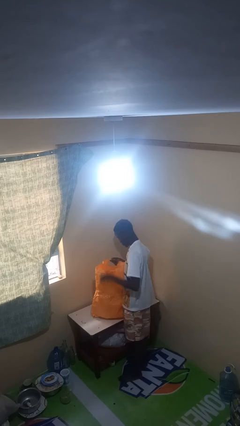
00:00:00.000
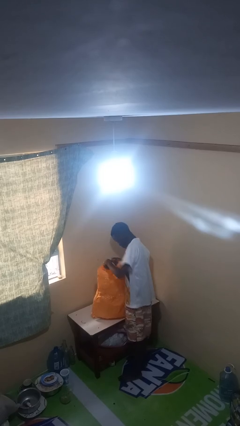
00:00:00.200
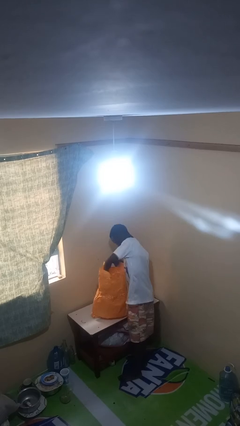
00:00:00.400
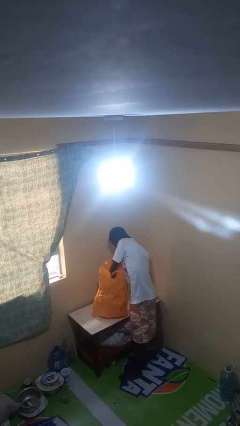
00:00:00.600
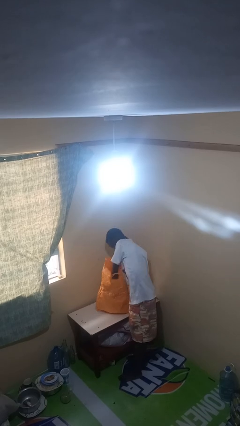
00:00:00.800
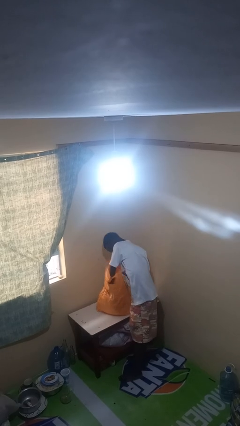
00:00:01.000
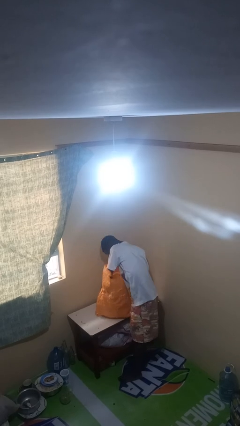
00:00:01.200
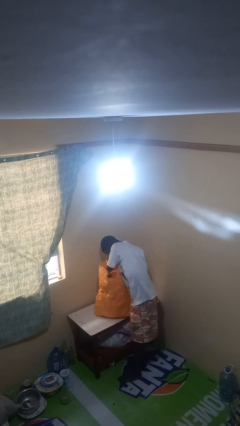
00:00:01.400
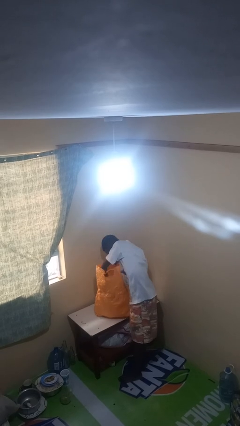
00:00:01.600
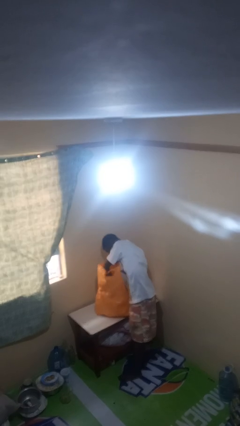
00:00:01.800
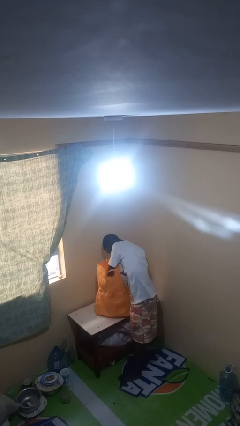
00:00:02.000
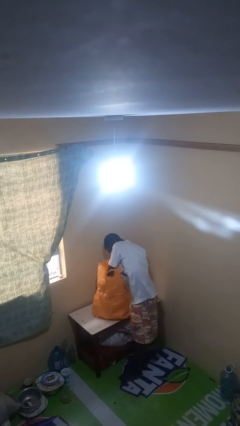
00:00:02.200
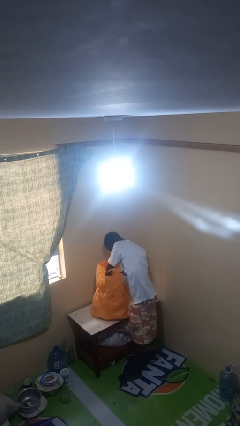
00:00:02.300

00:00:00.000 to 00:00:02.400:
person searches in bag

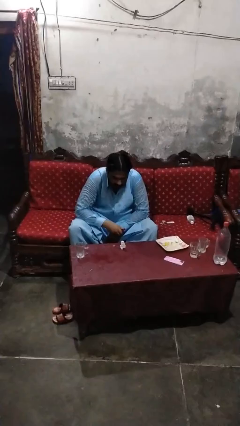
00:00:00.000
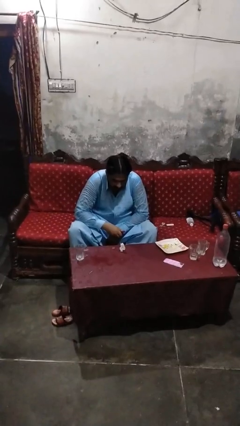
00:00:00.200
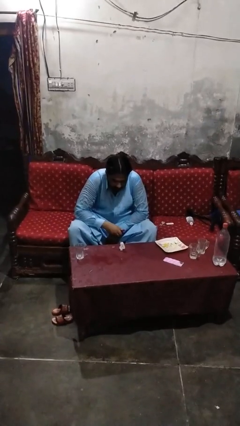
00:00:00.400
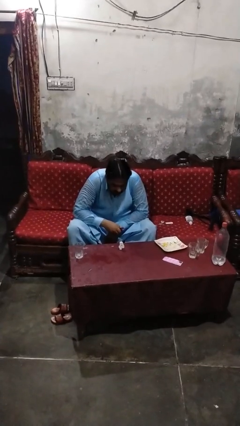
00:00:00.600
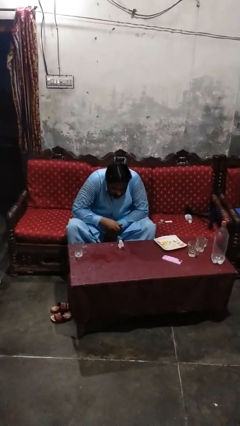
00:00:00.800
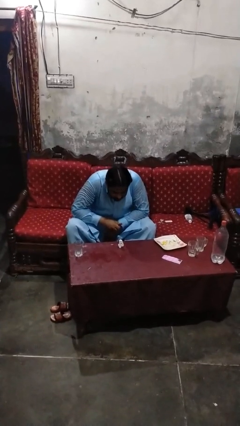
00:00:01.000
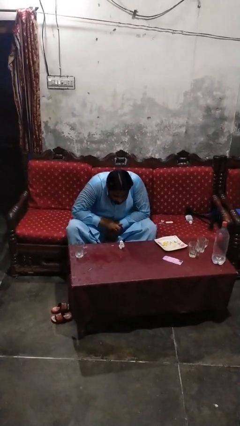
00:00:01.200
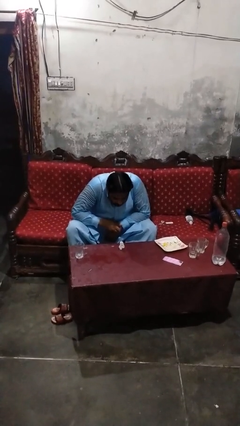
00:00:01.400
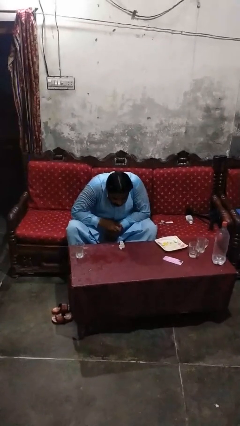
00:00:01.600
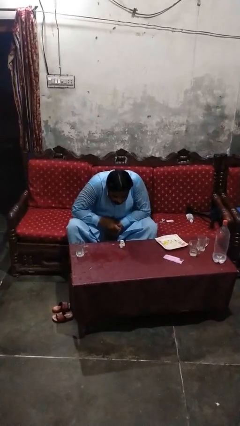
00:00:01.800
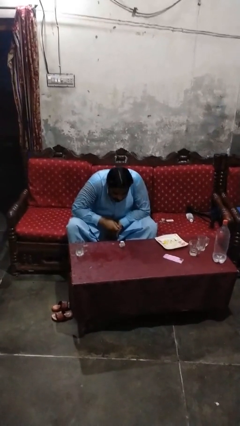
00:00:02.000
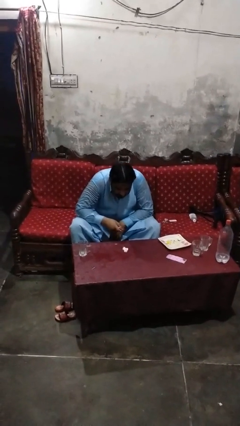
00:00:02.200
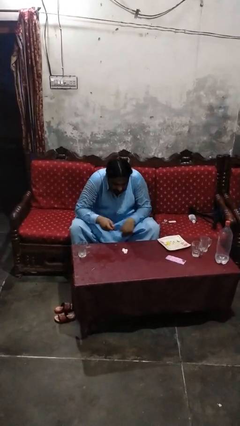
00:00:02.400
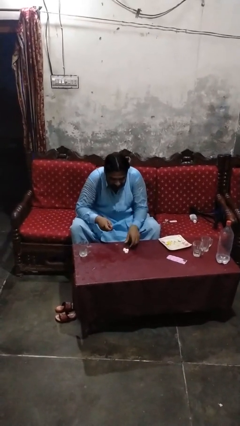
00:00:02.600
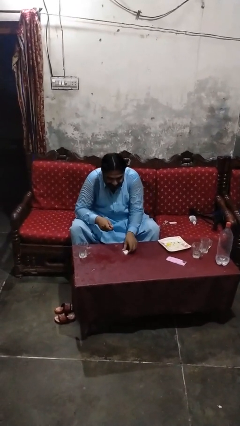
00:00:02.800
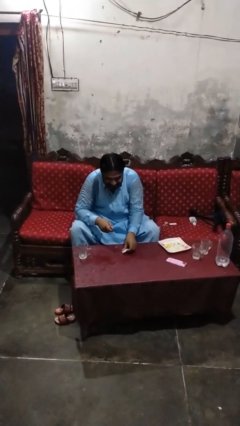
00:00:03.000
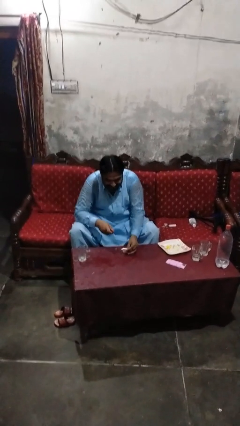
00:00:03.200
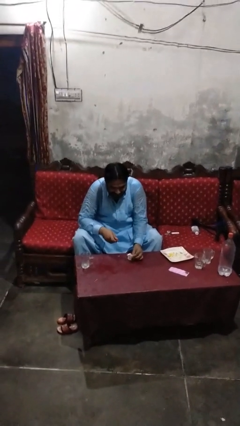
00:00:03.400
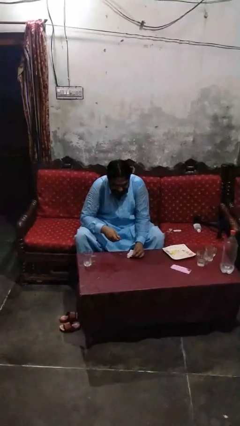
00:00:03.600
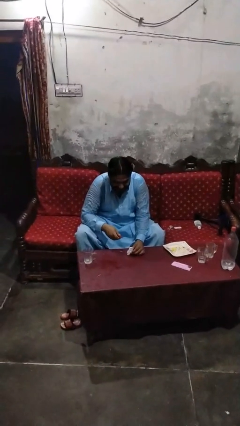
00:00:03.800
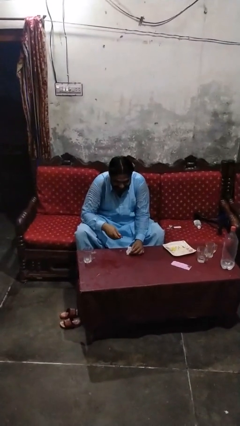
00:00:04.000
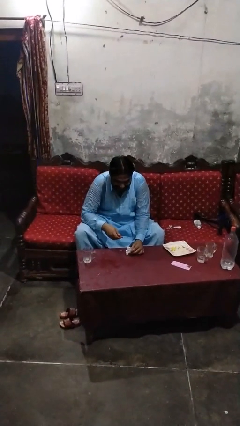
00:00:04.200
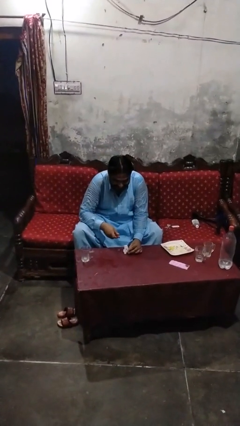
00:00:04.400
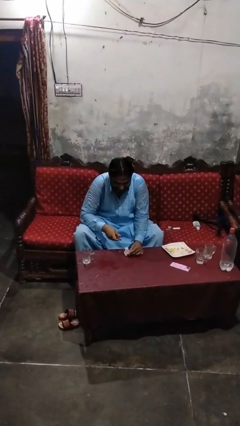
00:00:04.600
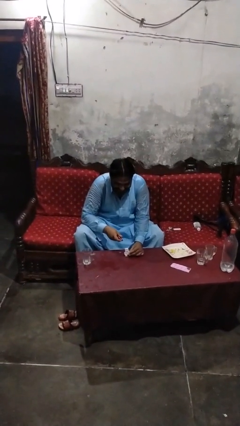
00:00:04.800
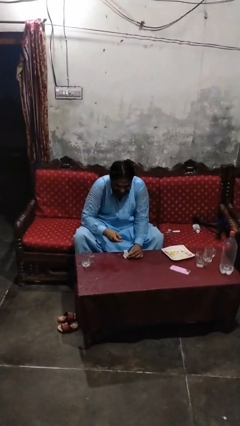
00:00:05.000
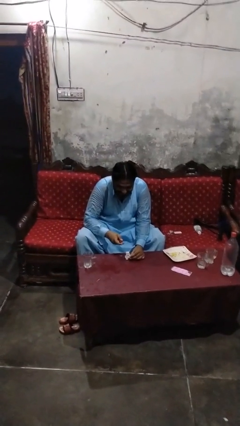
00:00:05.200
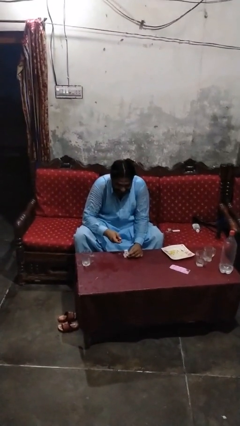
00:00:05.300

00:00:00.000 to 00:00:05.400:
person extinguishes candle

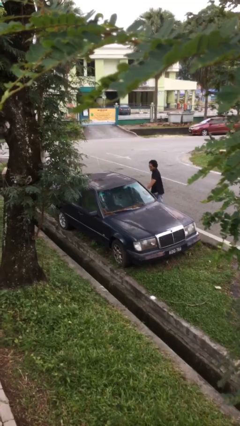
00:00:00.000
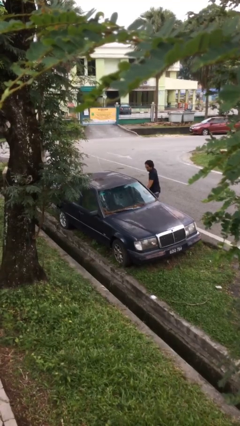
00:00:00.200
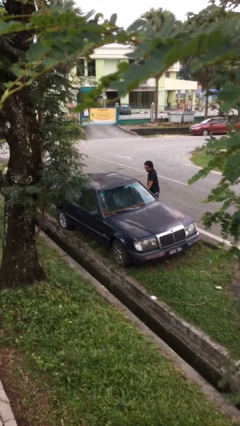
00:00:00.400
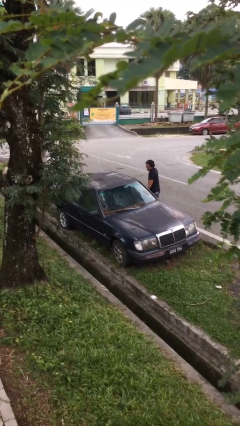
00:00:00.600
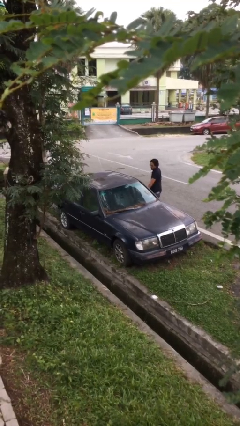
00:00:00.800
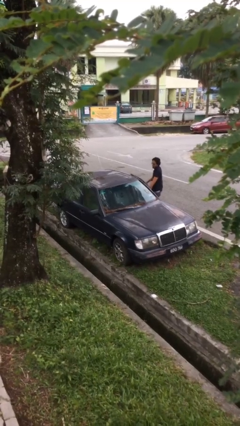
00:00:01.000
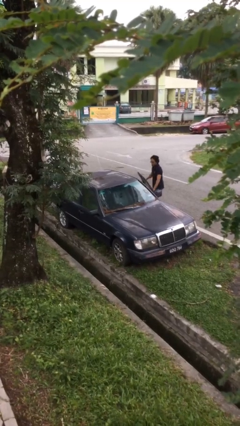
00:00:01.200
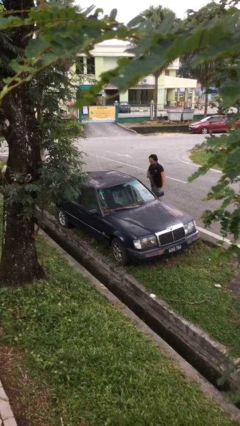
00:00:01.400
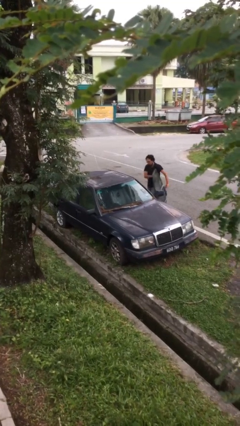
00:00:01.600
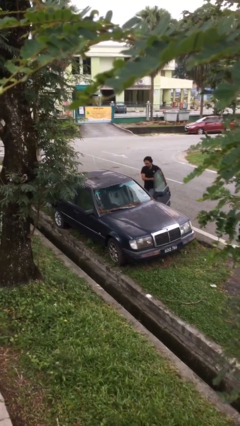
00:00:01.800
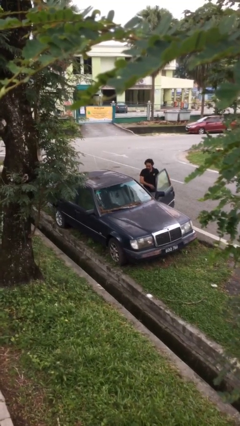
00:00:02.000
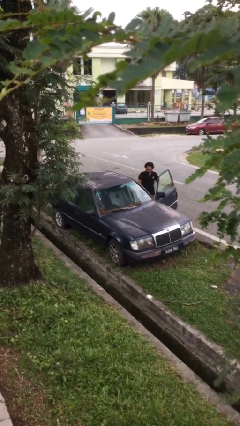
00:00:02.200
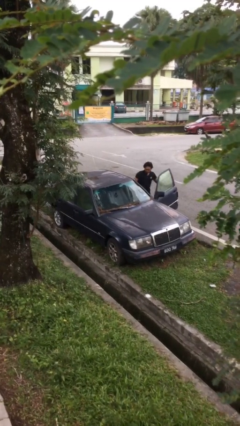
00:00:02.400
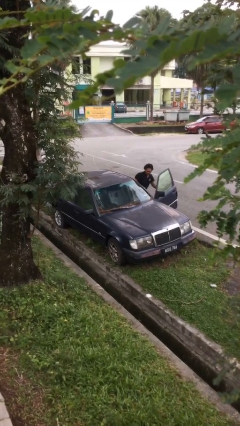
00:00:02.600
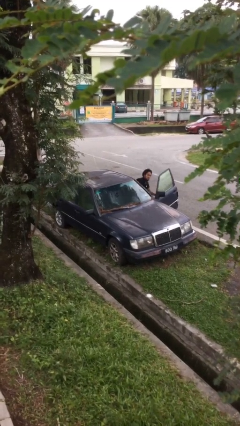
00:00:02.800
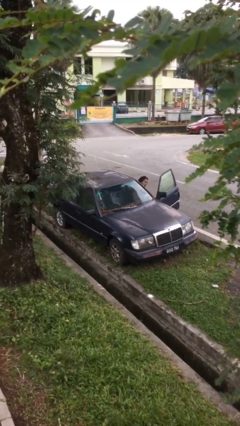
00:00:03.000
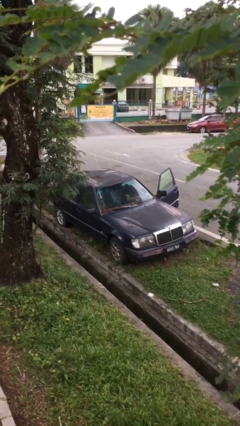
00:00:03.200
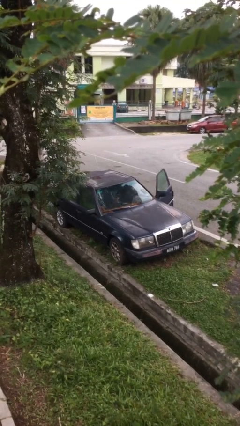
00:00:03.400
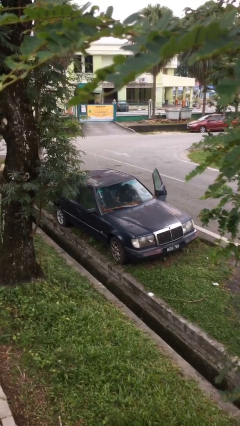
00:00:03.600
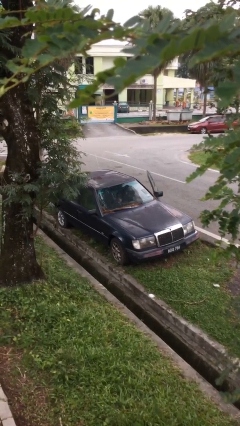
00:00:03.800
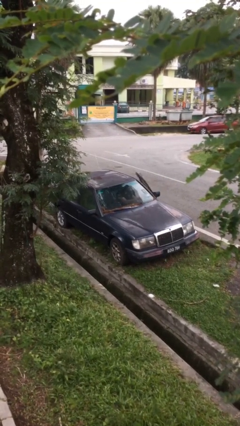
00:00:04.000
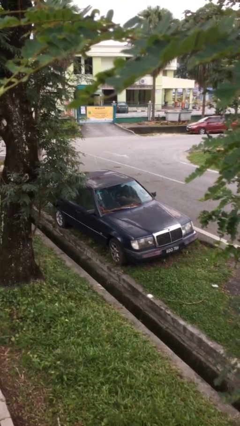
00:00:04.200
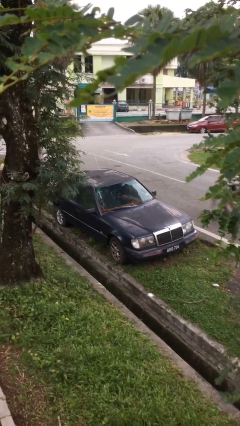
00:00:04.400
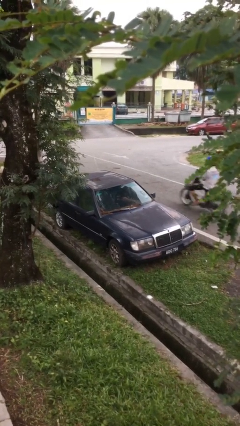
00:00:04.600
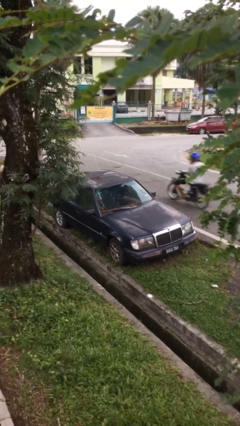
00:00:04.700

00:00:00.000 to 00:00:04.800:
car picks up person

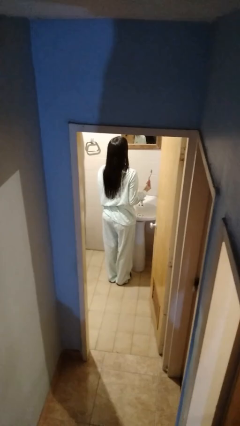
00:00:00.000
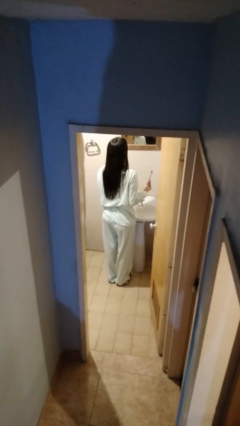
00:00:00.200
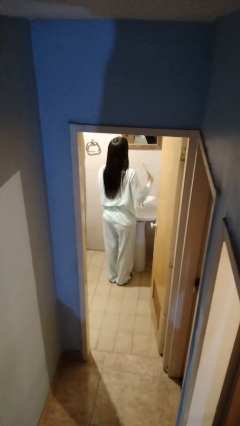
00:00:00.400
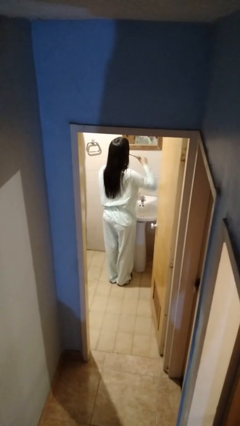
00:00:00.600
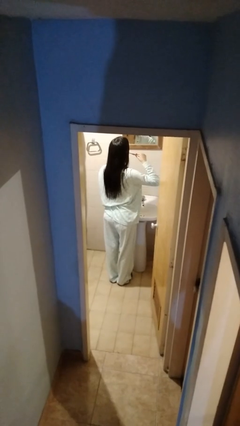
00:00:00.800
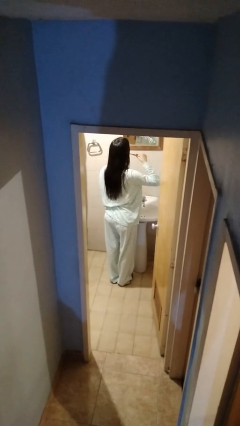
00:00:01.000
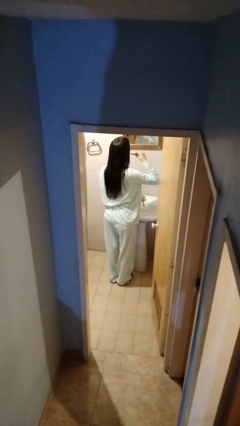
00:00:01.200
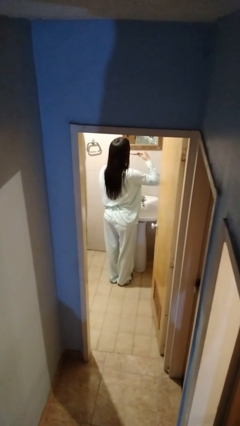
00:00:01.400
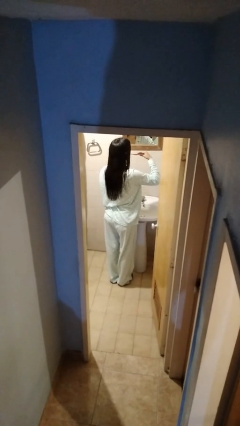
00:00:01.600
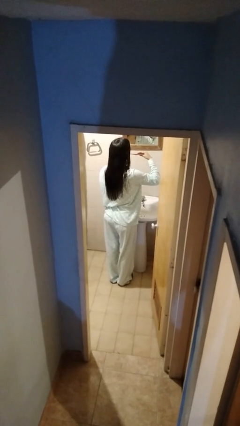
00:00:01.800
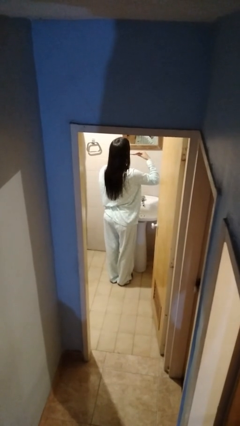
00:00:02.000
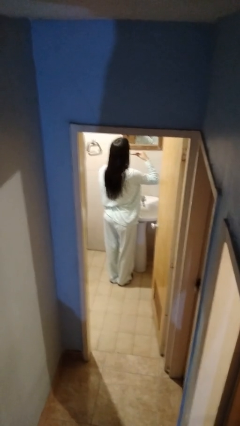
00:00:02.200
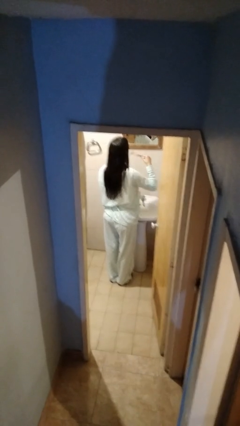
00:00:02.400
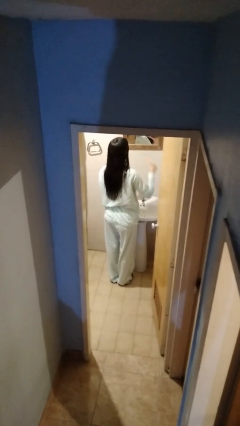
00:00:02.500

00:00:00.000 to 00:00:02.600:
person brushes teeth

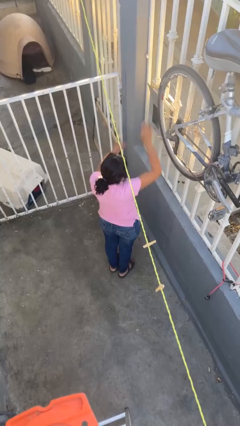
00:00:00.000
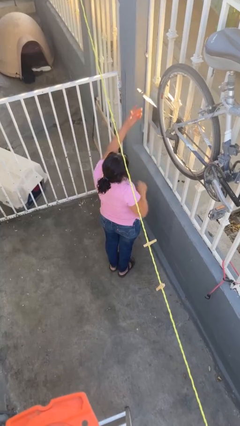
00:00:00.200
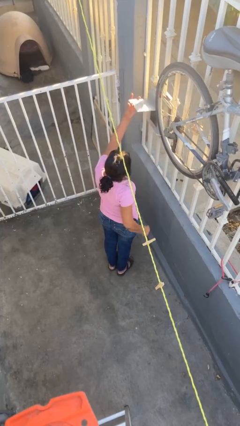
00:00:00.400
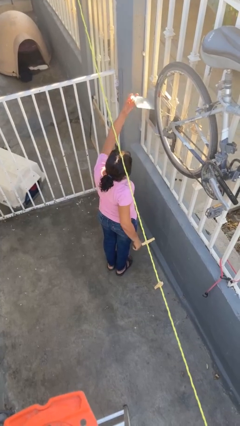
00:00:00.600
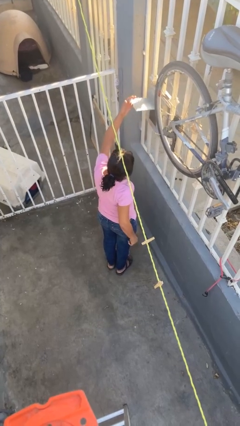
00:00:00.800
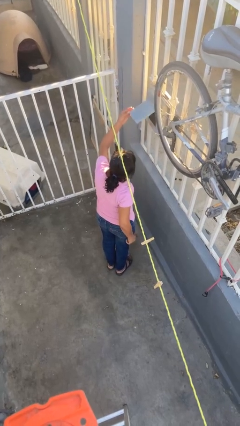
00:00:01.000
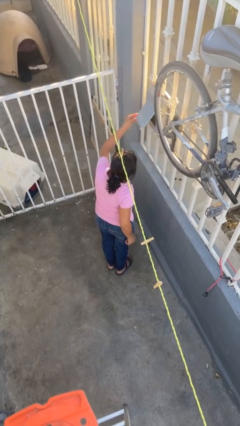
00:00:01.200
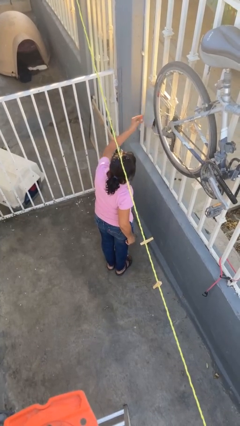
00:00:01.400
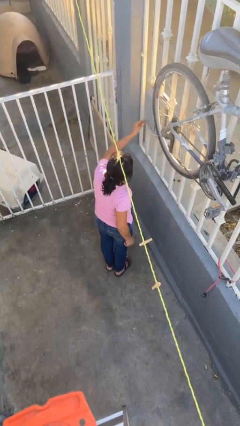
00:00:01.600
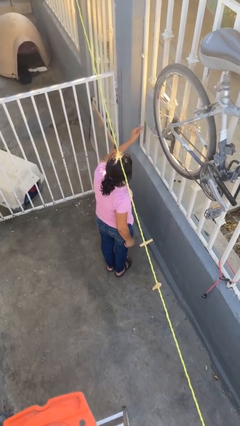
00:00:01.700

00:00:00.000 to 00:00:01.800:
person closes mailbox

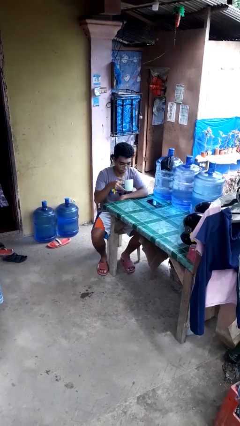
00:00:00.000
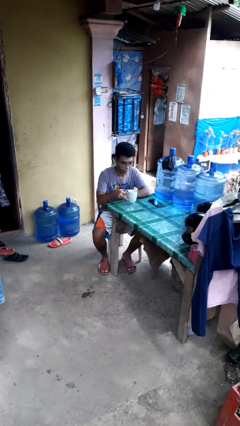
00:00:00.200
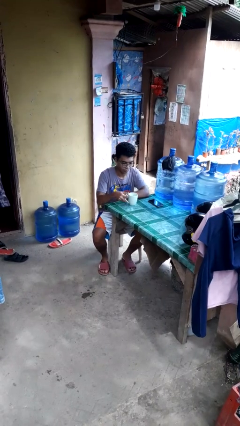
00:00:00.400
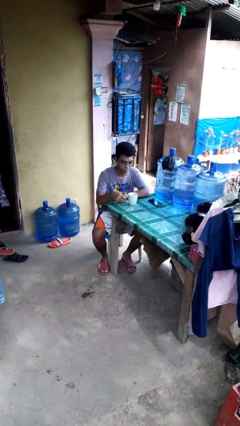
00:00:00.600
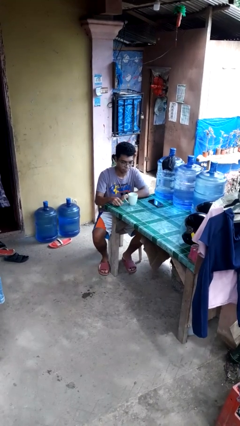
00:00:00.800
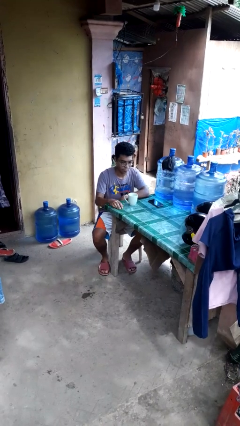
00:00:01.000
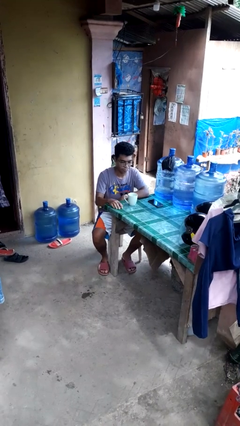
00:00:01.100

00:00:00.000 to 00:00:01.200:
person puts down object on table
